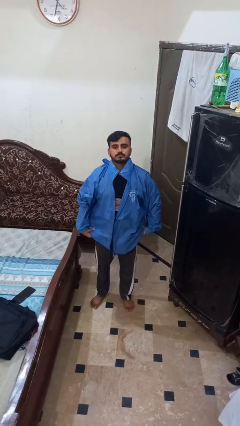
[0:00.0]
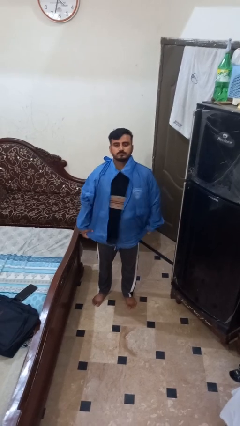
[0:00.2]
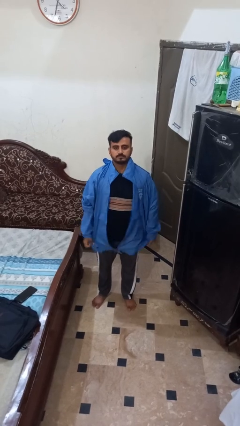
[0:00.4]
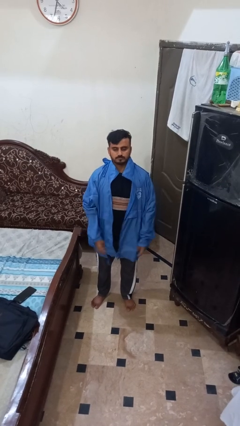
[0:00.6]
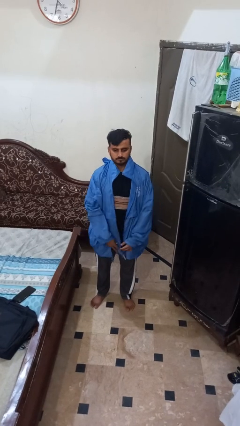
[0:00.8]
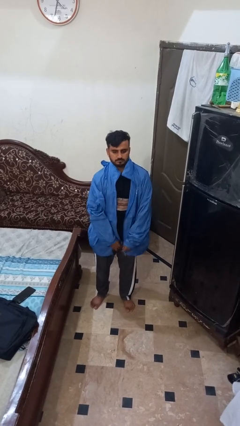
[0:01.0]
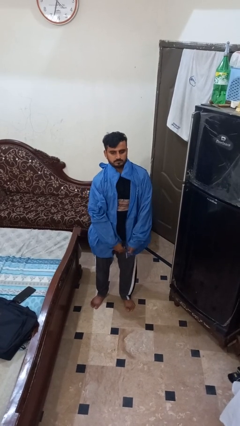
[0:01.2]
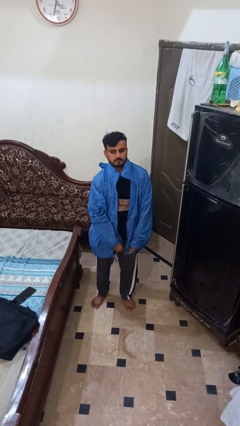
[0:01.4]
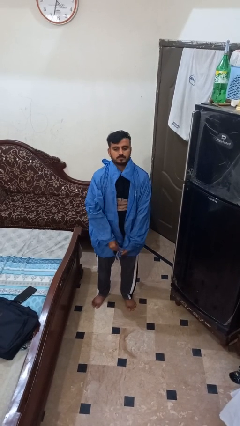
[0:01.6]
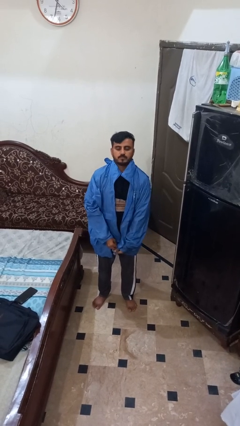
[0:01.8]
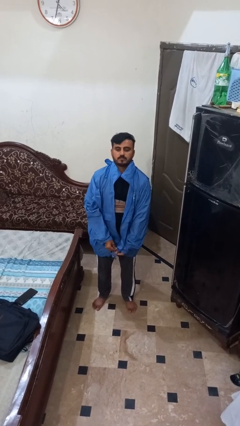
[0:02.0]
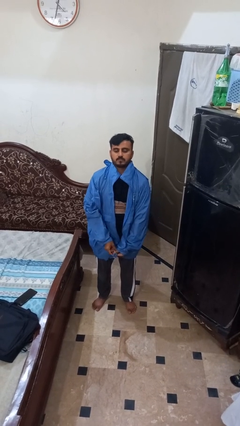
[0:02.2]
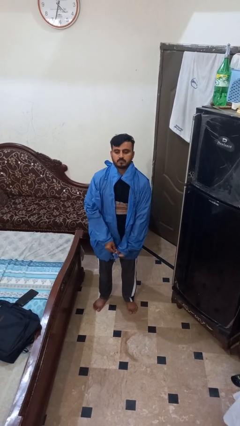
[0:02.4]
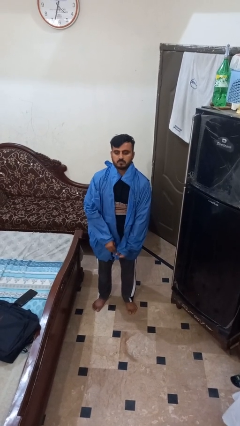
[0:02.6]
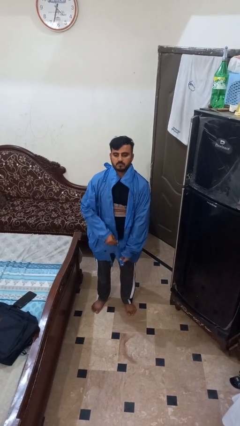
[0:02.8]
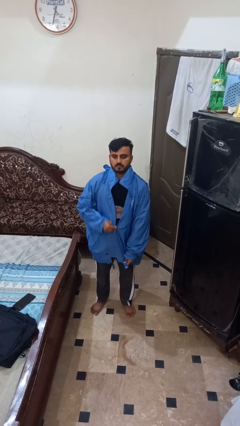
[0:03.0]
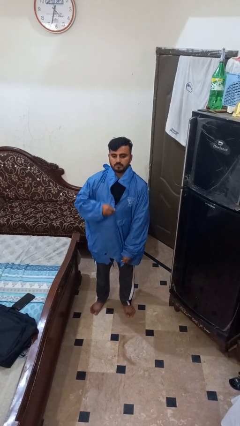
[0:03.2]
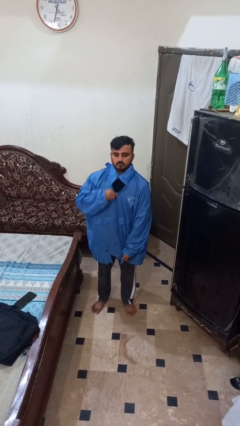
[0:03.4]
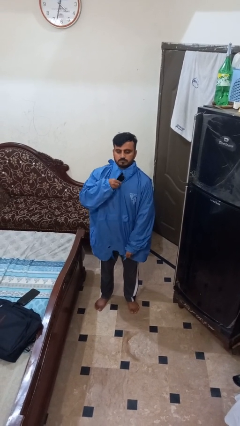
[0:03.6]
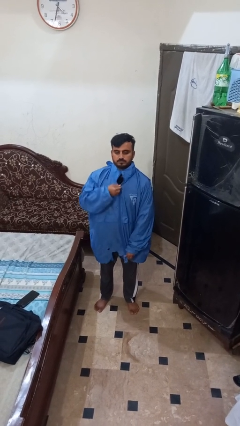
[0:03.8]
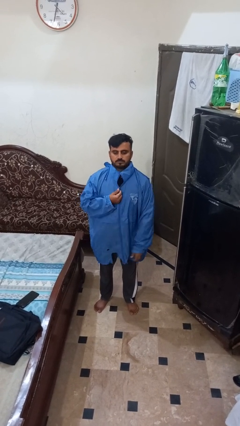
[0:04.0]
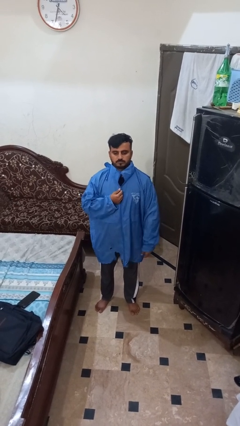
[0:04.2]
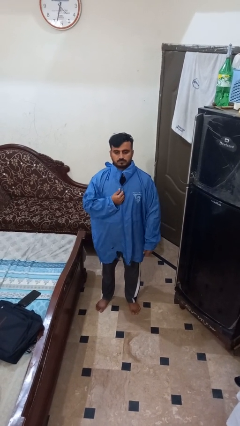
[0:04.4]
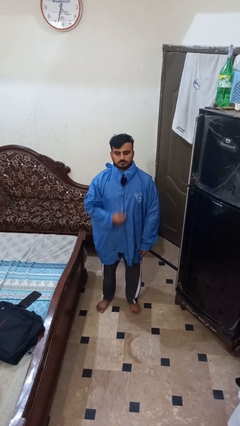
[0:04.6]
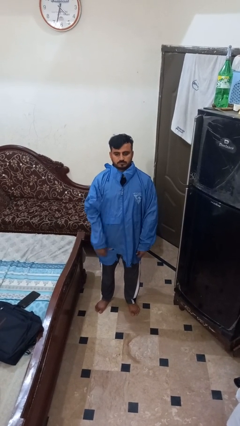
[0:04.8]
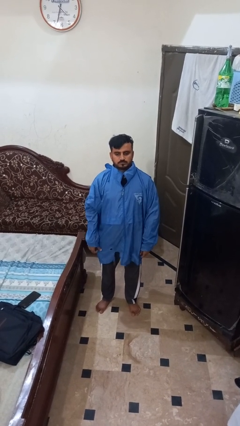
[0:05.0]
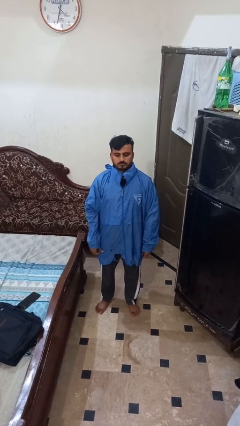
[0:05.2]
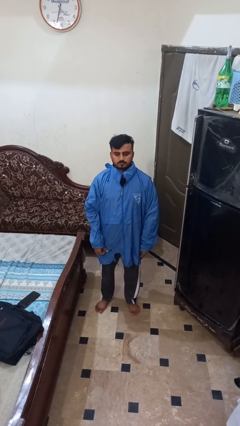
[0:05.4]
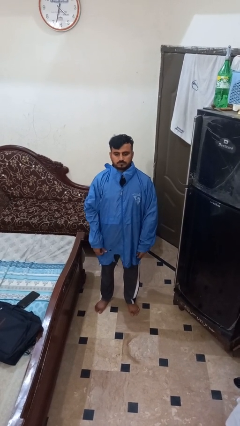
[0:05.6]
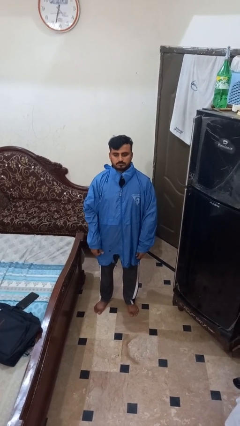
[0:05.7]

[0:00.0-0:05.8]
person zips up jacket

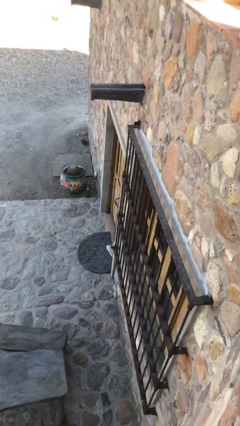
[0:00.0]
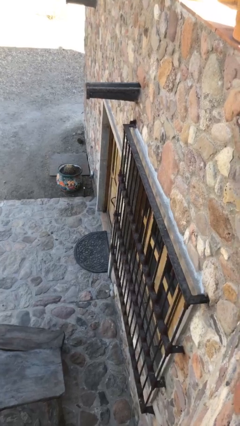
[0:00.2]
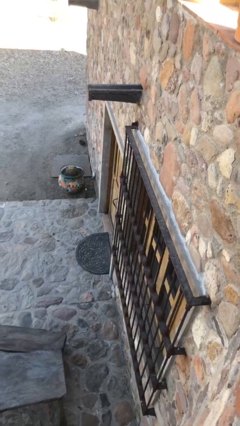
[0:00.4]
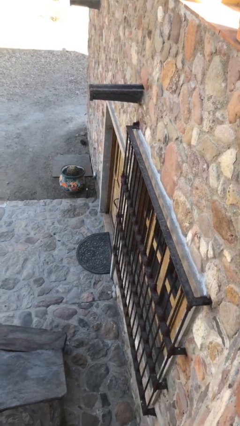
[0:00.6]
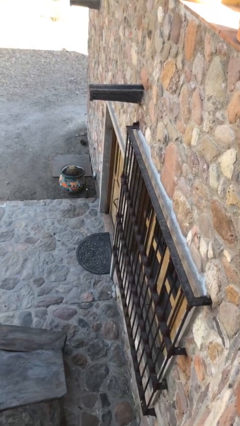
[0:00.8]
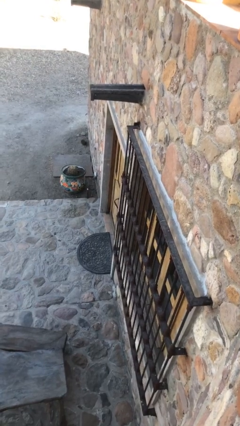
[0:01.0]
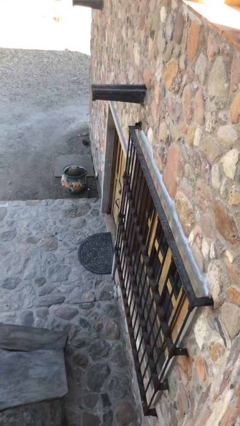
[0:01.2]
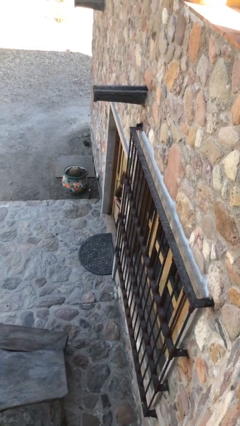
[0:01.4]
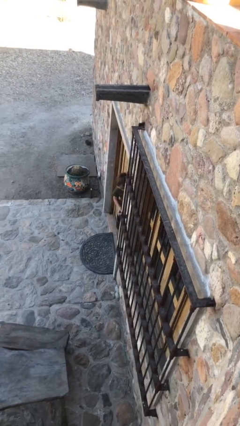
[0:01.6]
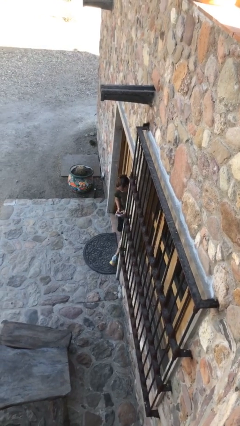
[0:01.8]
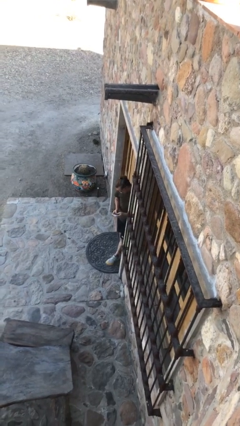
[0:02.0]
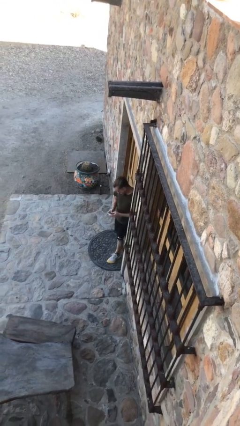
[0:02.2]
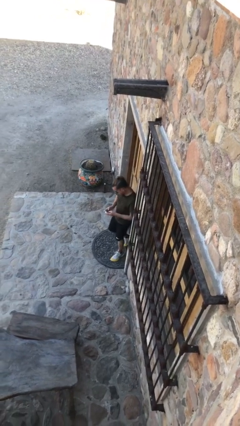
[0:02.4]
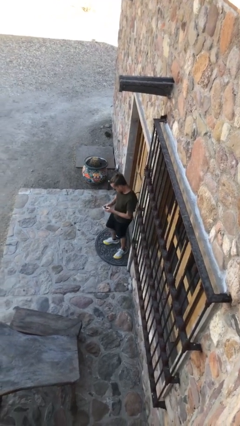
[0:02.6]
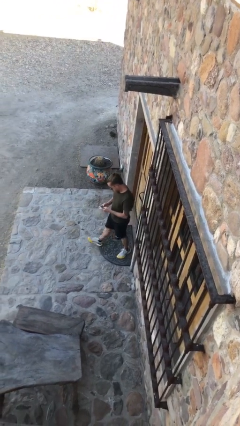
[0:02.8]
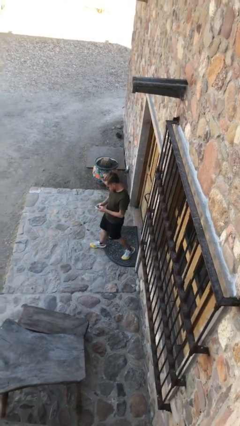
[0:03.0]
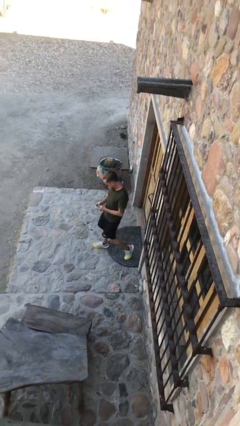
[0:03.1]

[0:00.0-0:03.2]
person enters scene through structure

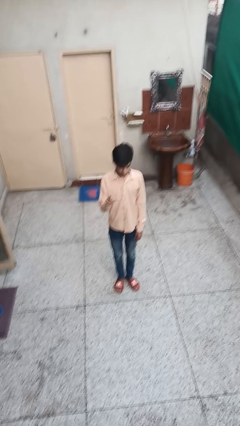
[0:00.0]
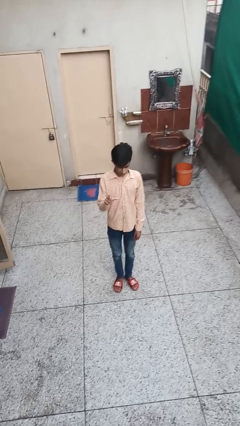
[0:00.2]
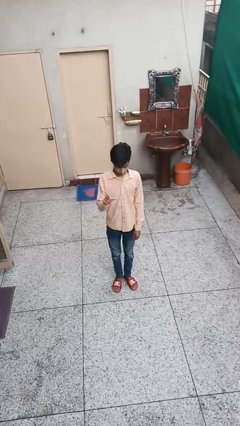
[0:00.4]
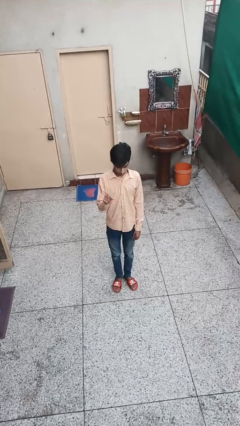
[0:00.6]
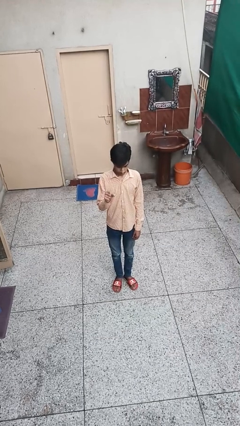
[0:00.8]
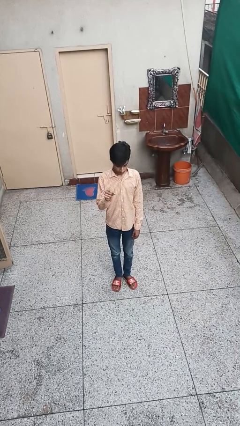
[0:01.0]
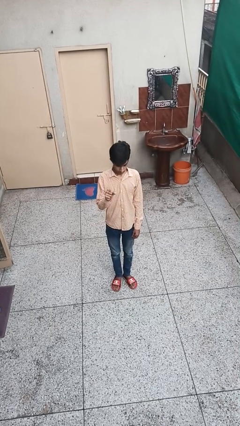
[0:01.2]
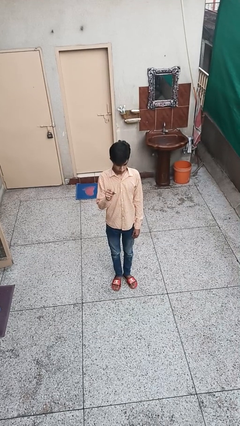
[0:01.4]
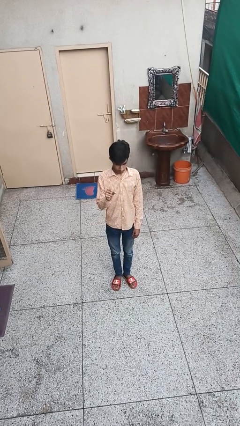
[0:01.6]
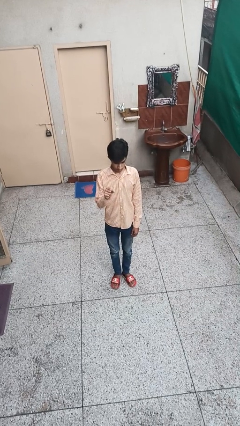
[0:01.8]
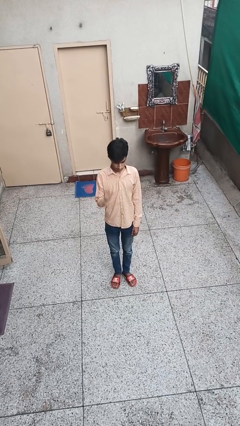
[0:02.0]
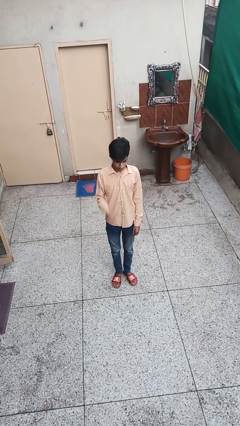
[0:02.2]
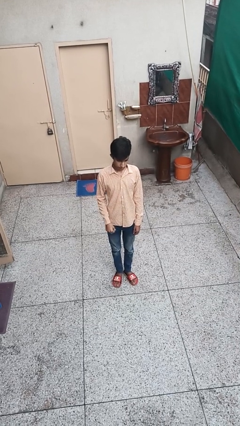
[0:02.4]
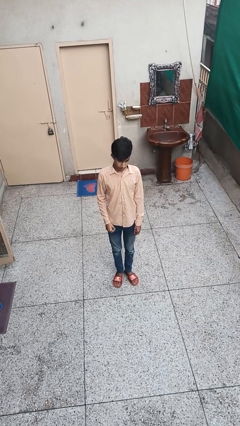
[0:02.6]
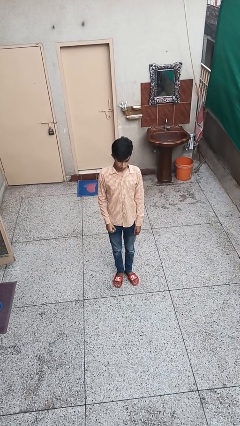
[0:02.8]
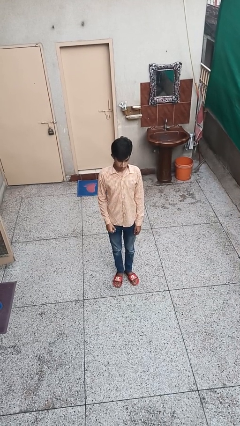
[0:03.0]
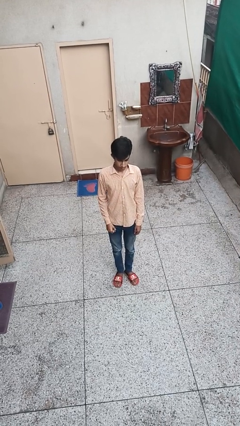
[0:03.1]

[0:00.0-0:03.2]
person gestures zoom out

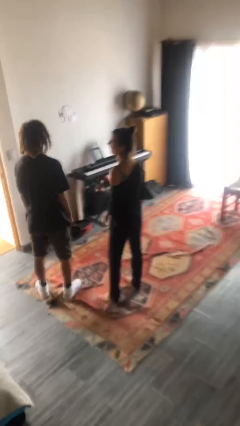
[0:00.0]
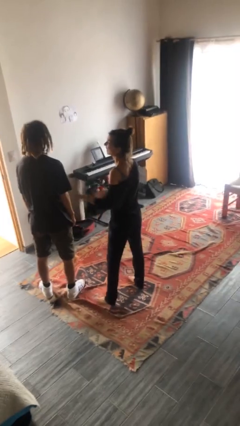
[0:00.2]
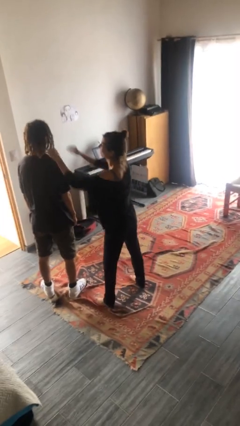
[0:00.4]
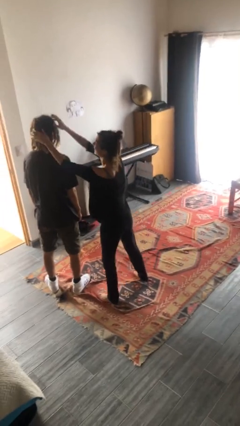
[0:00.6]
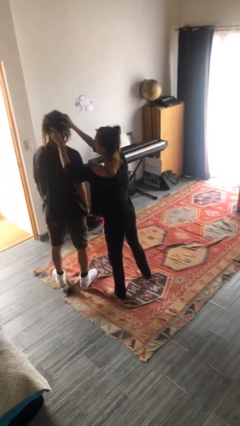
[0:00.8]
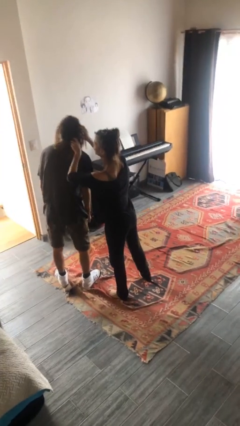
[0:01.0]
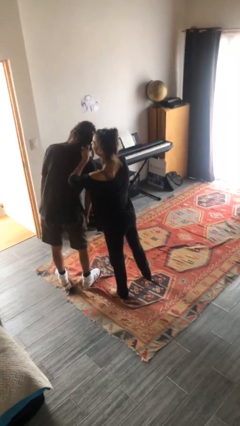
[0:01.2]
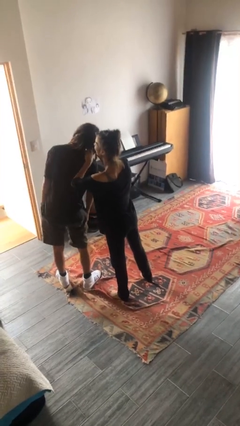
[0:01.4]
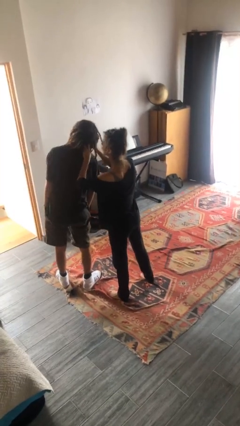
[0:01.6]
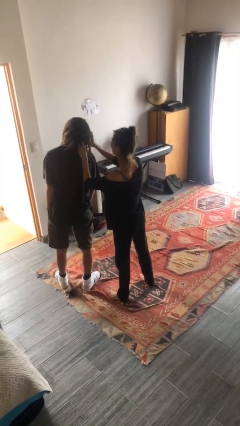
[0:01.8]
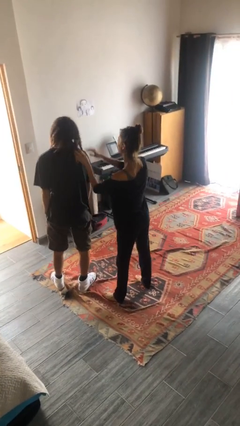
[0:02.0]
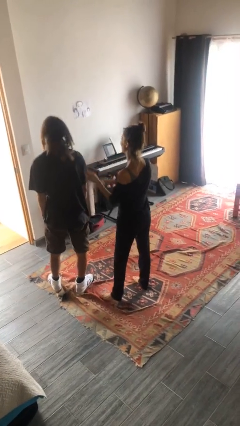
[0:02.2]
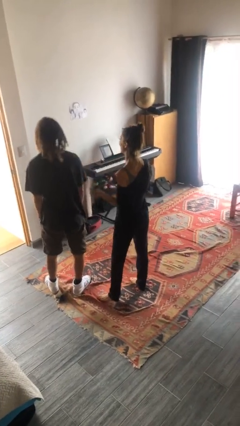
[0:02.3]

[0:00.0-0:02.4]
person grabs person by hair

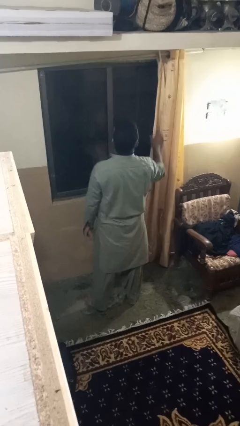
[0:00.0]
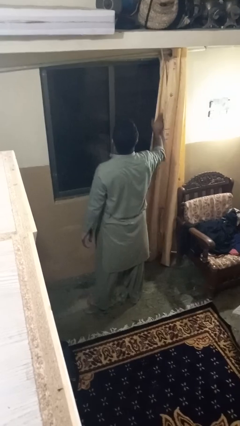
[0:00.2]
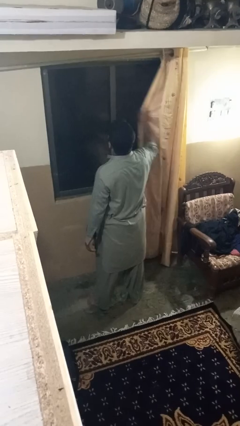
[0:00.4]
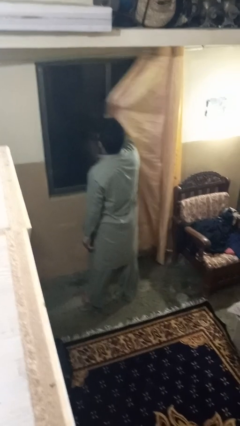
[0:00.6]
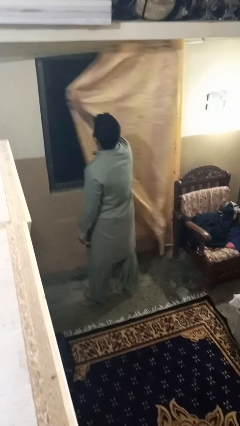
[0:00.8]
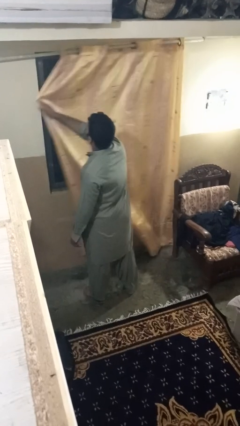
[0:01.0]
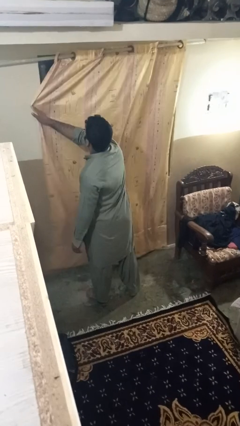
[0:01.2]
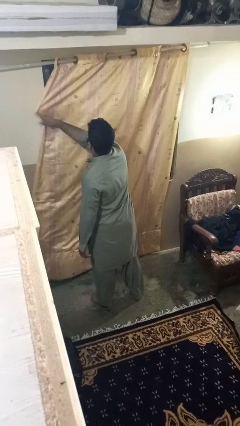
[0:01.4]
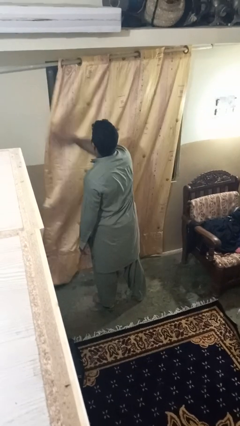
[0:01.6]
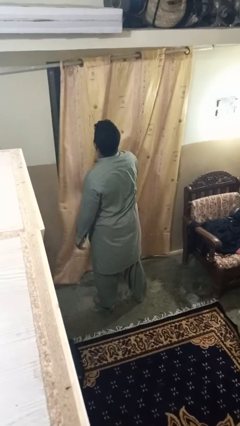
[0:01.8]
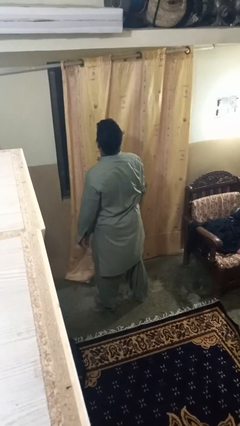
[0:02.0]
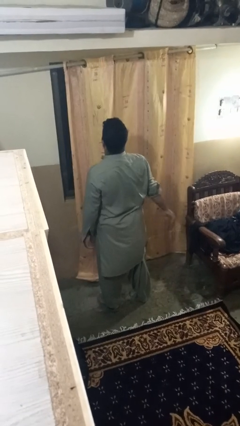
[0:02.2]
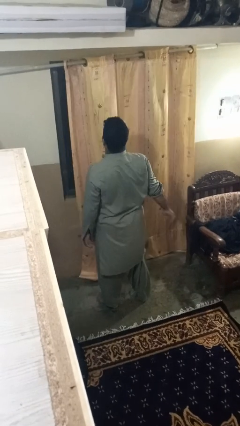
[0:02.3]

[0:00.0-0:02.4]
person closes curtains
